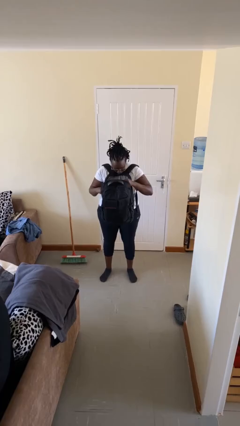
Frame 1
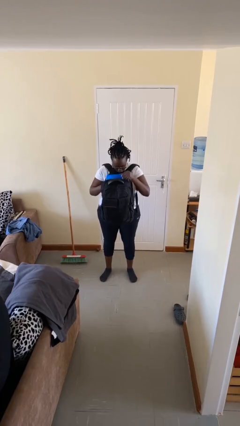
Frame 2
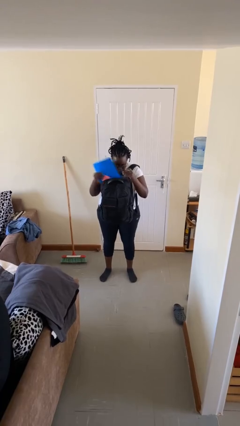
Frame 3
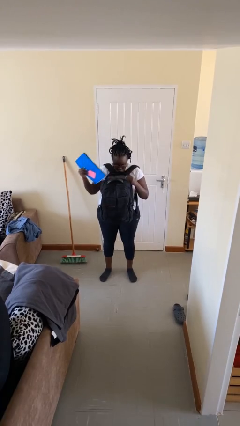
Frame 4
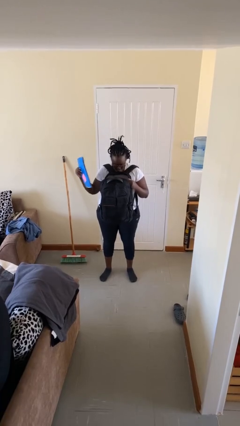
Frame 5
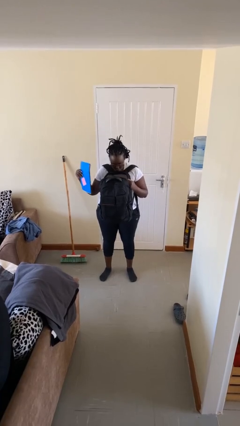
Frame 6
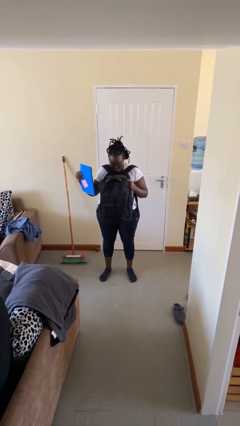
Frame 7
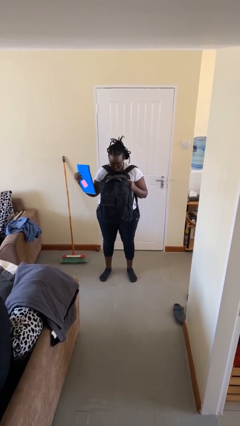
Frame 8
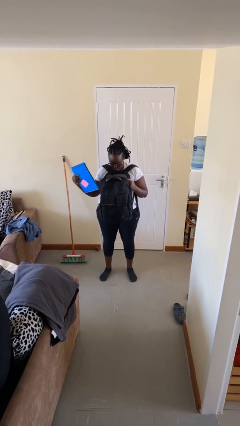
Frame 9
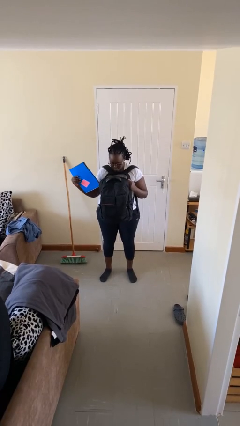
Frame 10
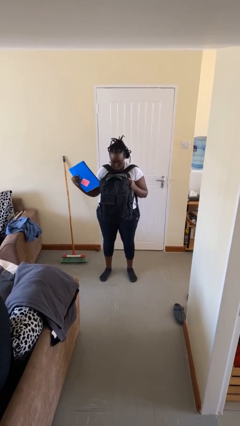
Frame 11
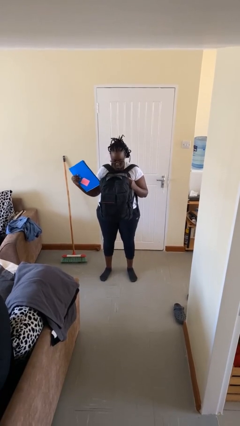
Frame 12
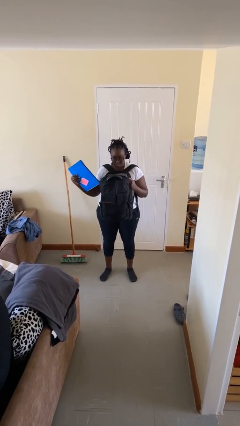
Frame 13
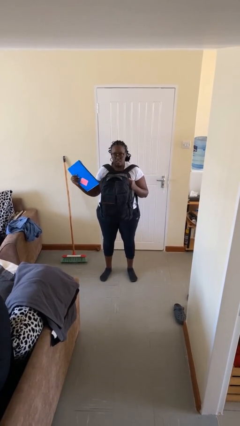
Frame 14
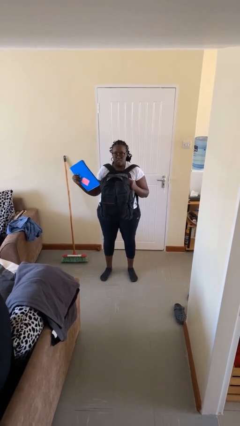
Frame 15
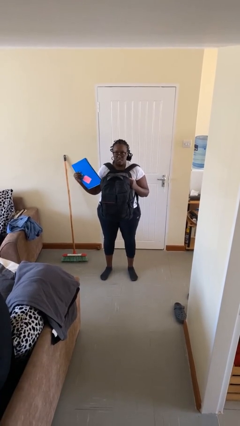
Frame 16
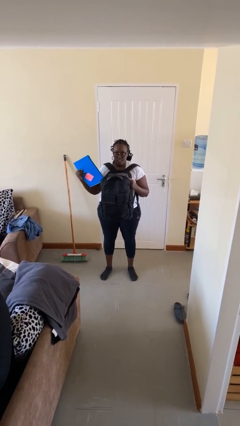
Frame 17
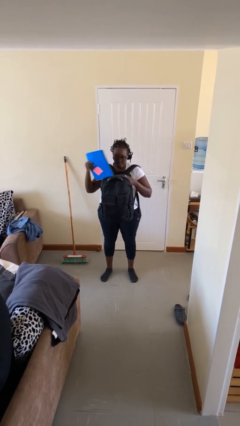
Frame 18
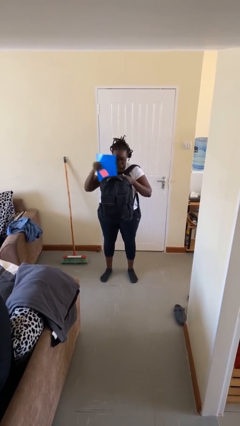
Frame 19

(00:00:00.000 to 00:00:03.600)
person takes object from backpack

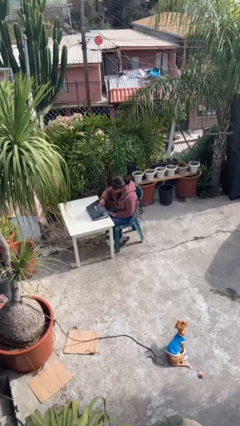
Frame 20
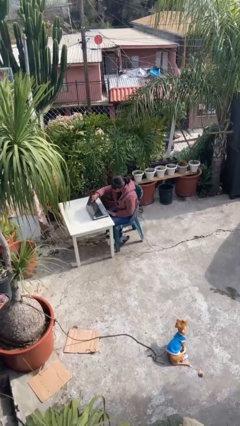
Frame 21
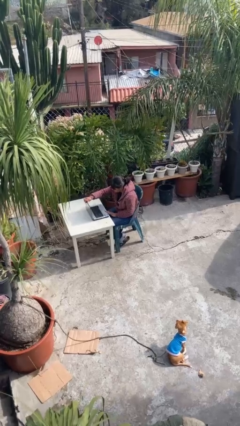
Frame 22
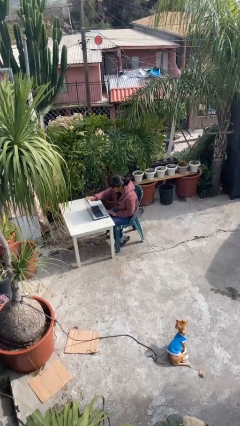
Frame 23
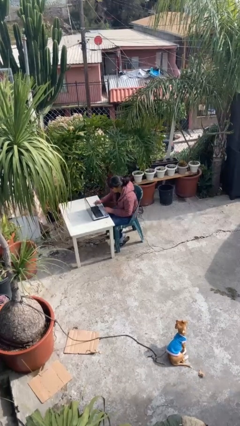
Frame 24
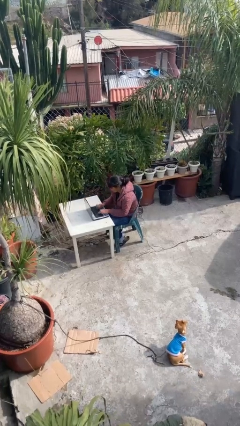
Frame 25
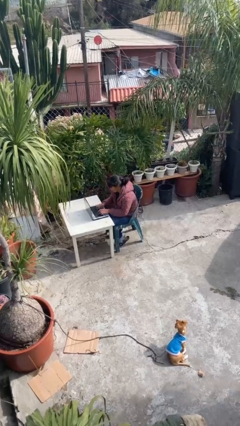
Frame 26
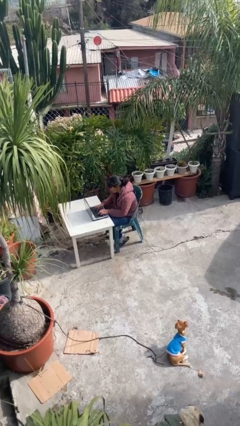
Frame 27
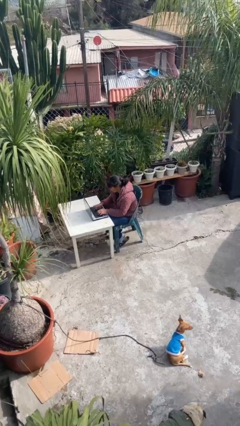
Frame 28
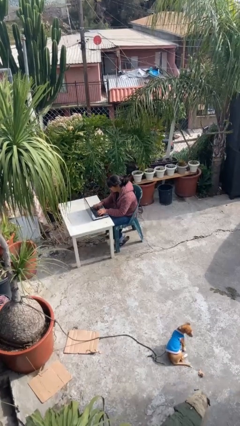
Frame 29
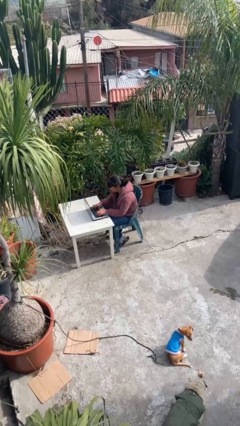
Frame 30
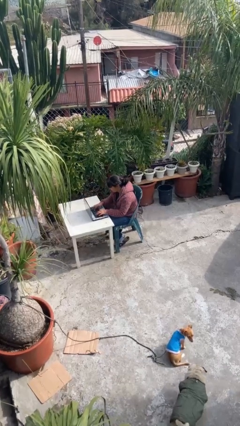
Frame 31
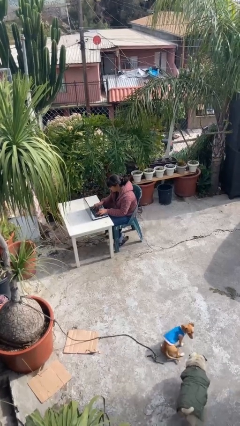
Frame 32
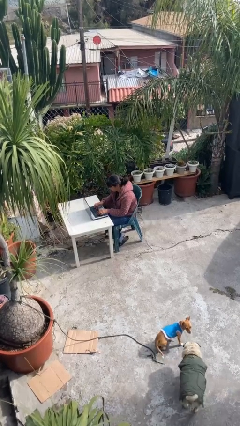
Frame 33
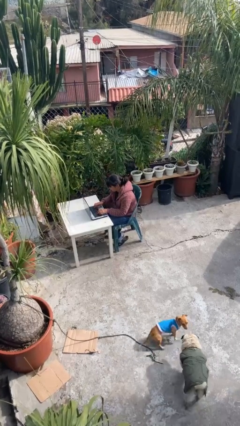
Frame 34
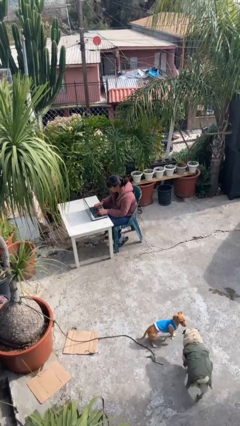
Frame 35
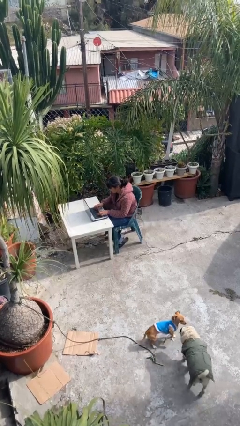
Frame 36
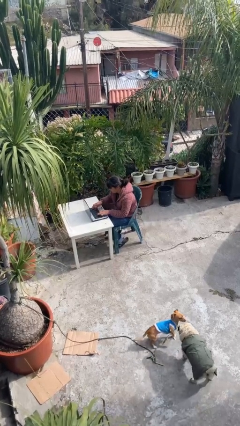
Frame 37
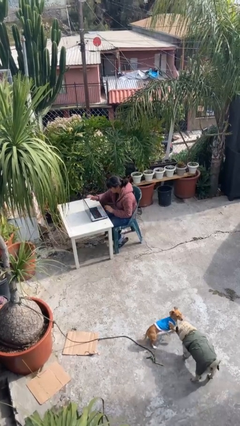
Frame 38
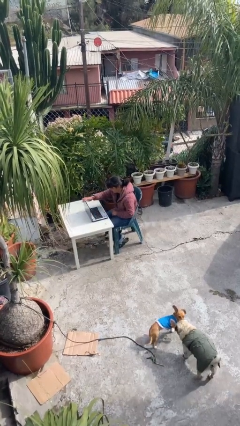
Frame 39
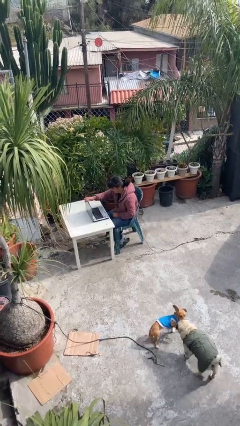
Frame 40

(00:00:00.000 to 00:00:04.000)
person interacts with laptop

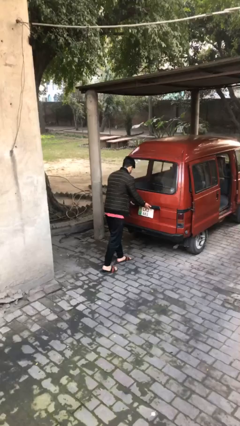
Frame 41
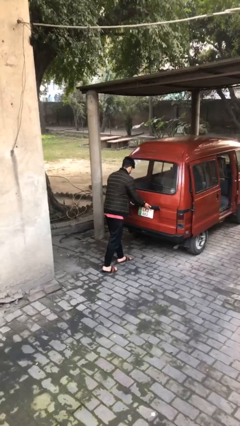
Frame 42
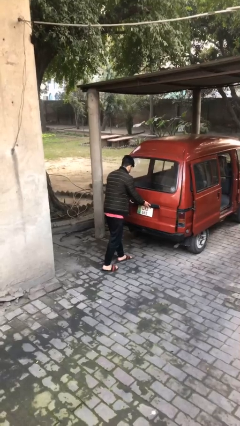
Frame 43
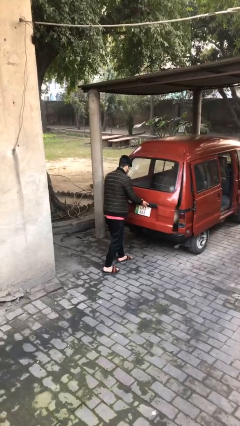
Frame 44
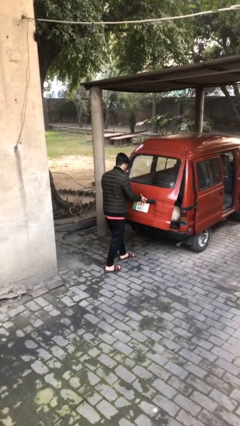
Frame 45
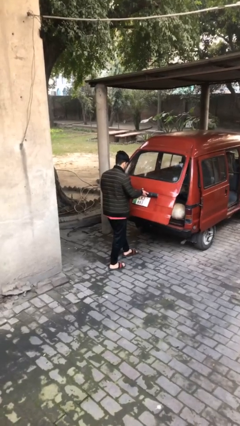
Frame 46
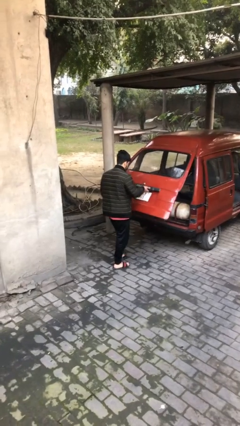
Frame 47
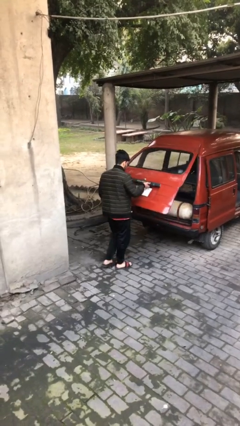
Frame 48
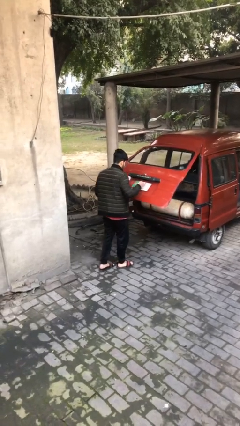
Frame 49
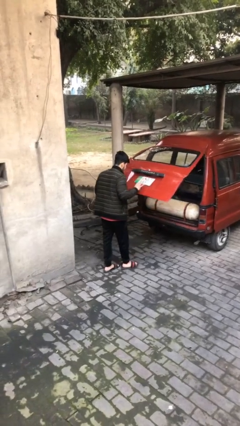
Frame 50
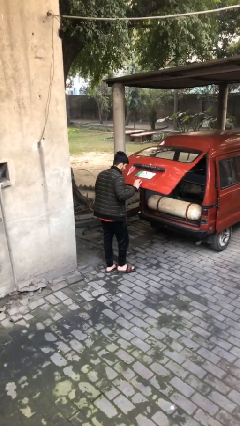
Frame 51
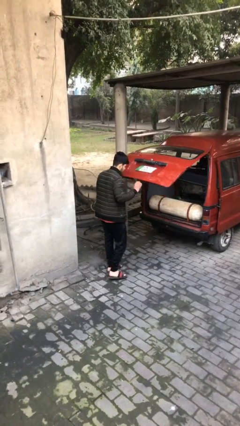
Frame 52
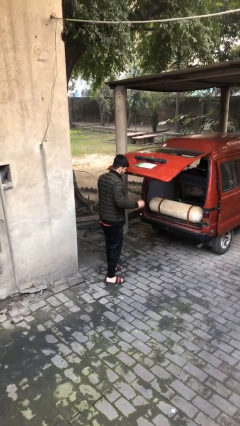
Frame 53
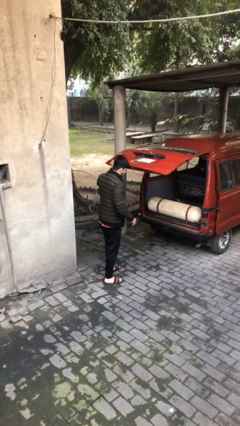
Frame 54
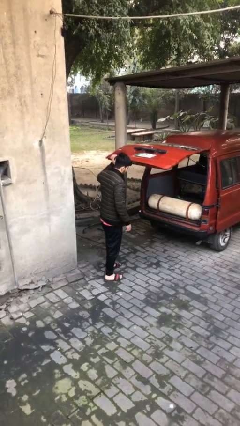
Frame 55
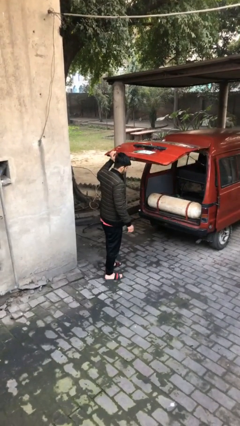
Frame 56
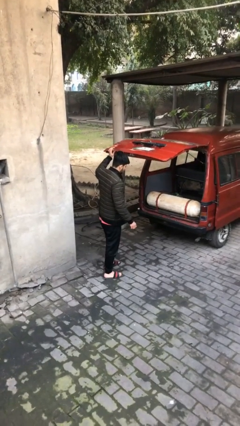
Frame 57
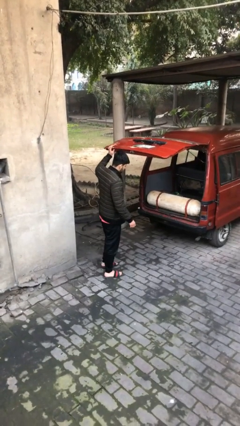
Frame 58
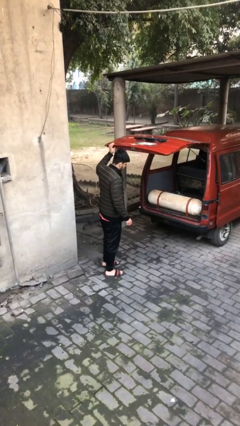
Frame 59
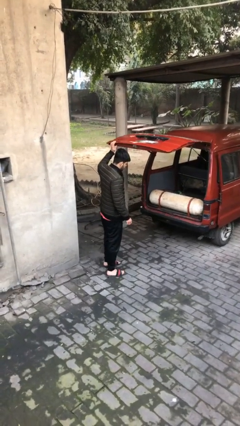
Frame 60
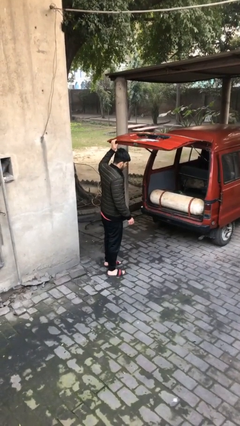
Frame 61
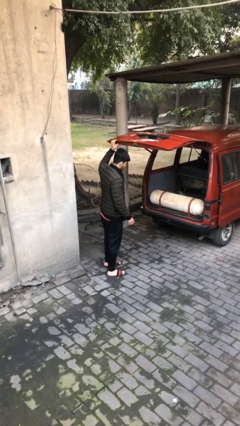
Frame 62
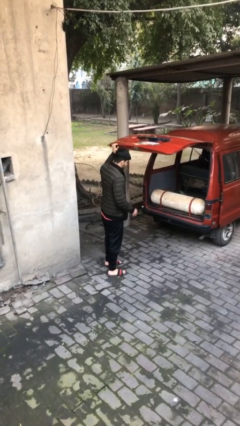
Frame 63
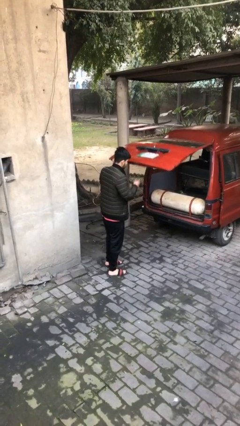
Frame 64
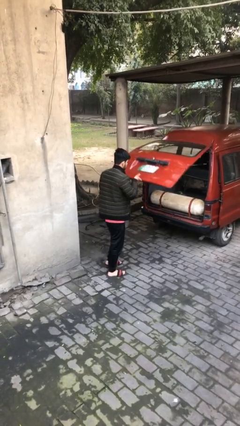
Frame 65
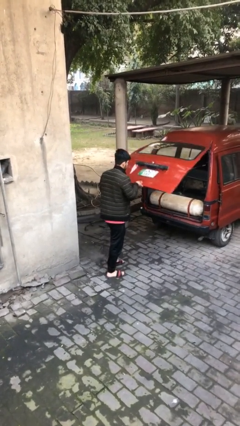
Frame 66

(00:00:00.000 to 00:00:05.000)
person opens car trunk

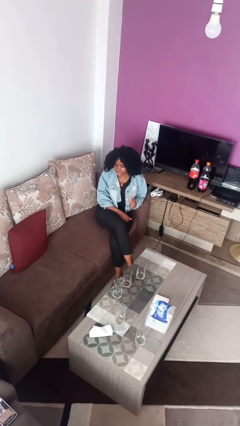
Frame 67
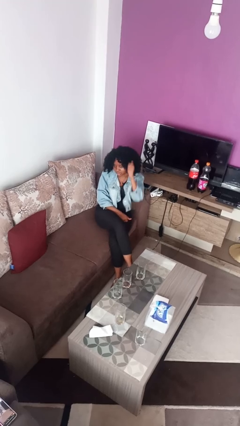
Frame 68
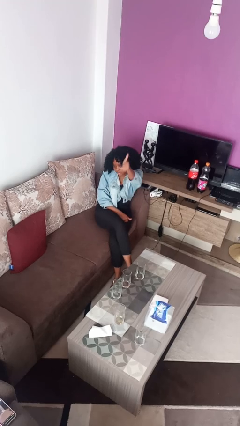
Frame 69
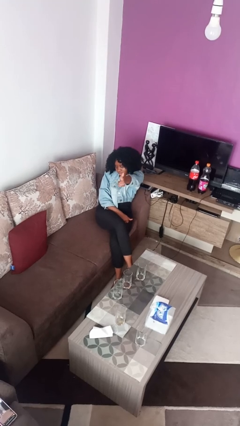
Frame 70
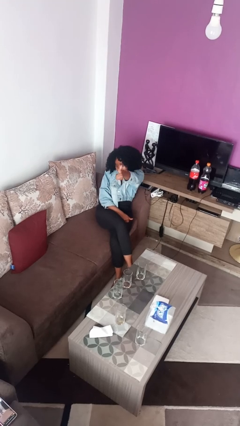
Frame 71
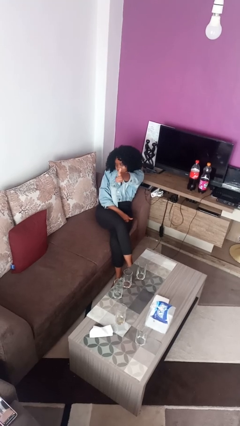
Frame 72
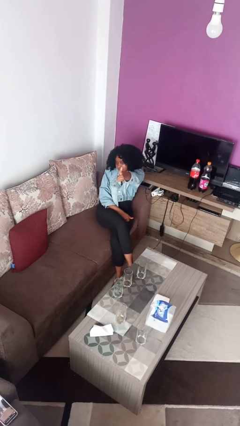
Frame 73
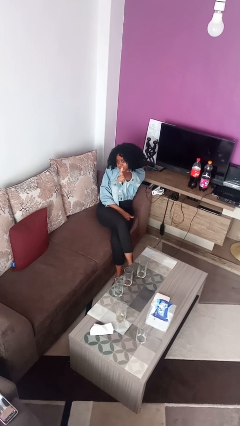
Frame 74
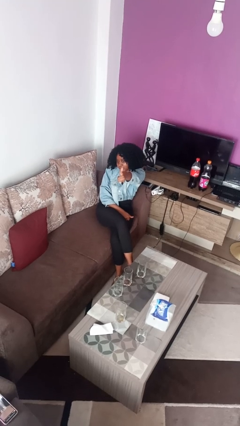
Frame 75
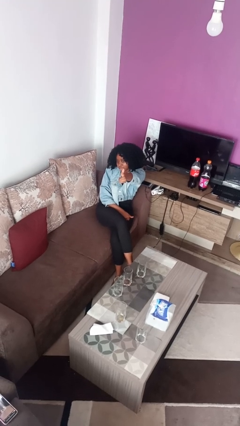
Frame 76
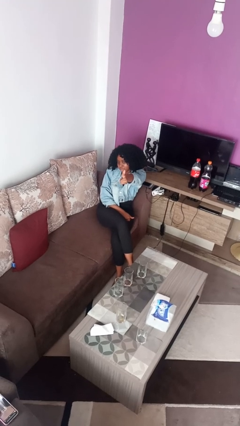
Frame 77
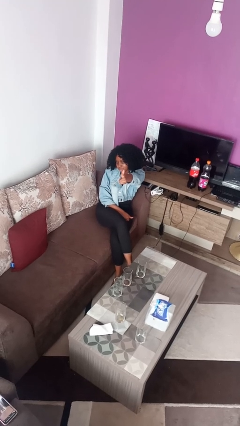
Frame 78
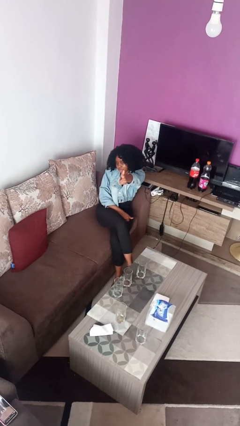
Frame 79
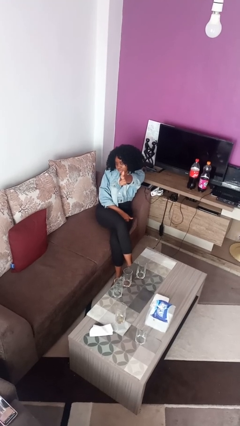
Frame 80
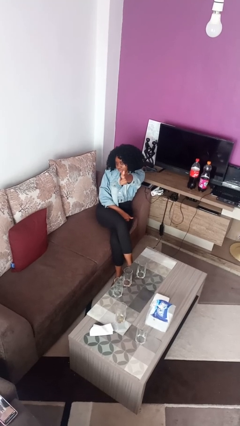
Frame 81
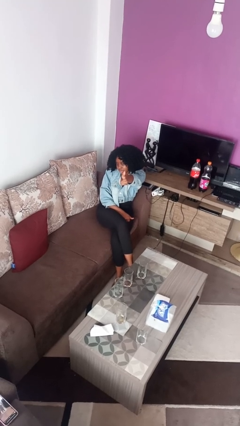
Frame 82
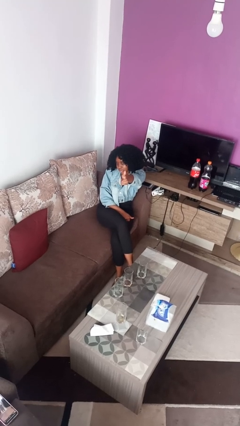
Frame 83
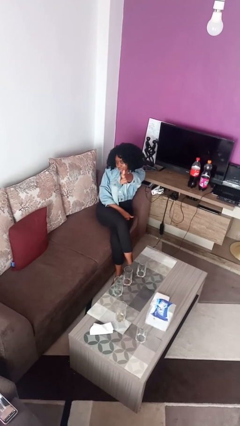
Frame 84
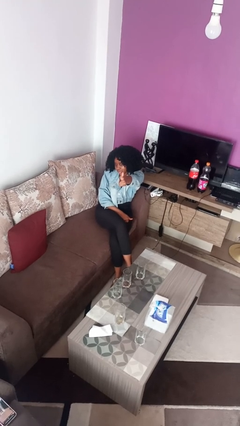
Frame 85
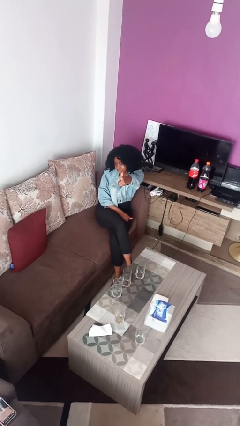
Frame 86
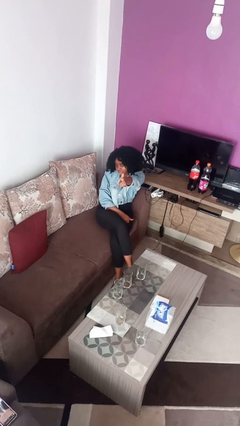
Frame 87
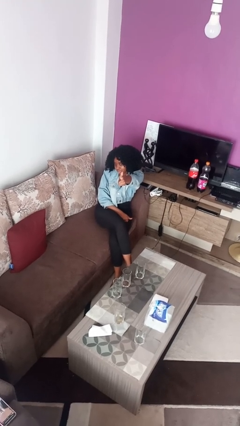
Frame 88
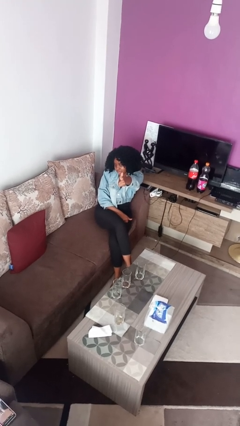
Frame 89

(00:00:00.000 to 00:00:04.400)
person gestures thumbs up

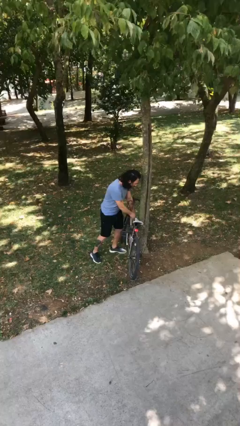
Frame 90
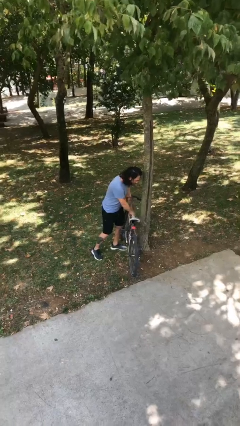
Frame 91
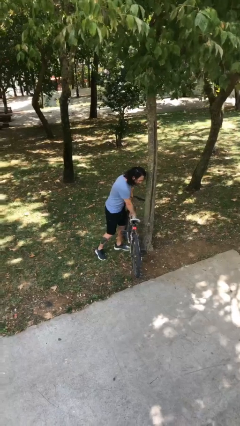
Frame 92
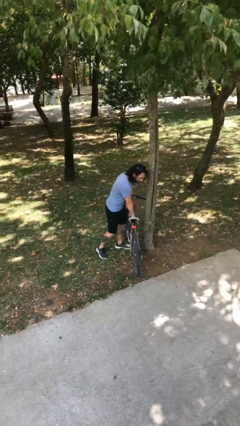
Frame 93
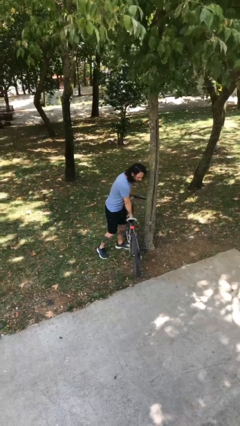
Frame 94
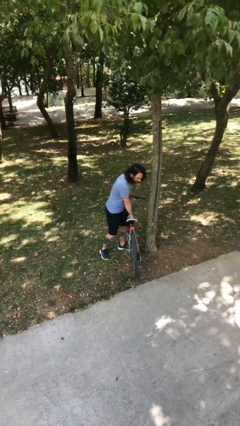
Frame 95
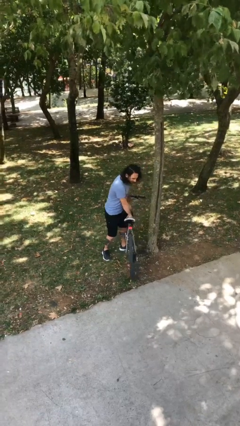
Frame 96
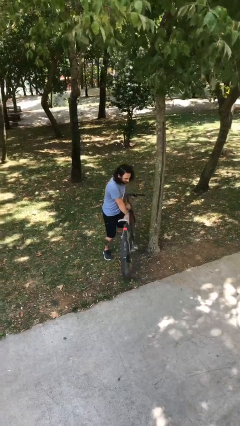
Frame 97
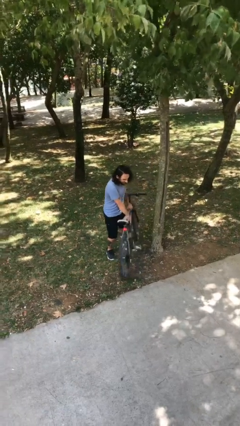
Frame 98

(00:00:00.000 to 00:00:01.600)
person picks up object from floor
